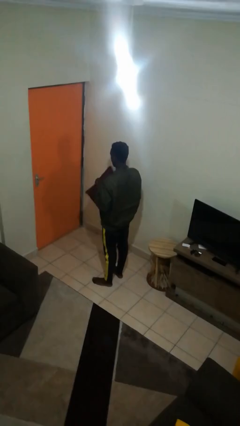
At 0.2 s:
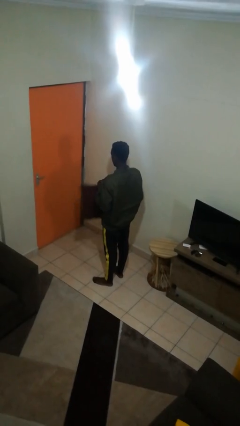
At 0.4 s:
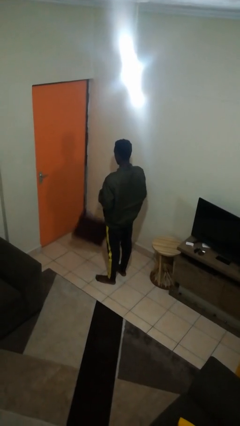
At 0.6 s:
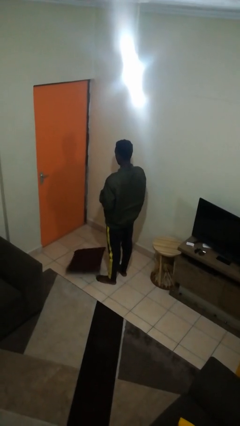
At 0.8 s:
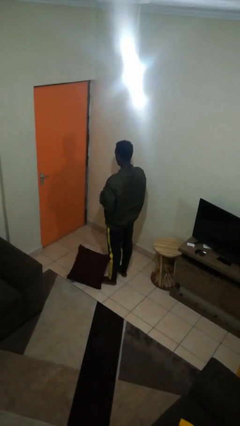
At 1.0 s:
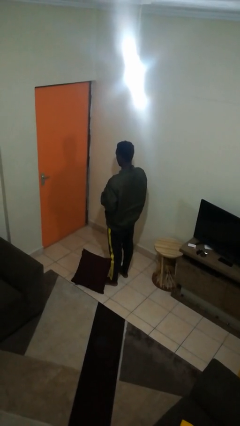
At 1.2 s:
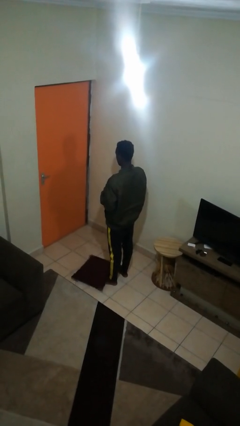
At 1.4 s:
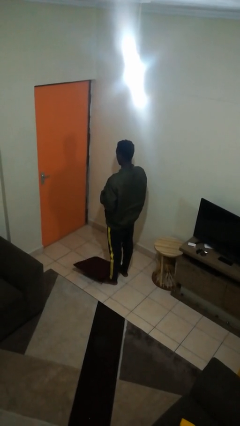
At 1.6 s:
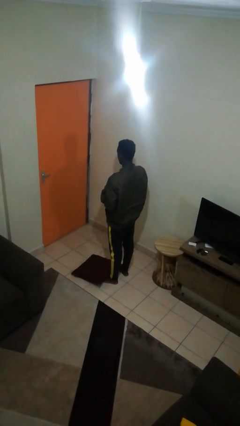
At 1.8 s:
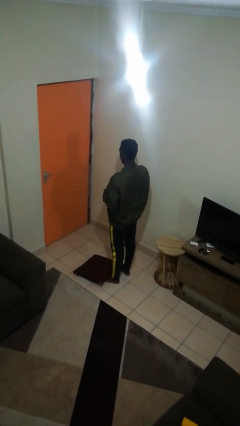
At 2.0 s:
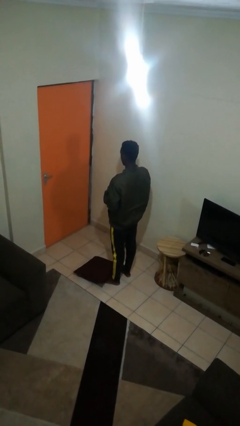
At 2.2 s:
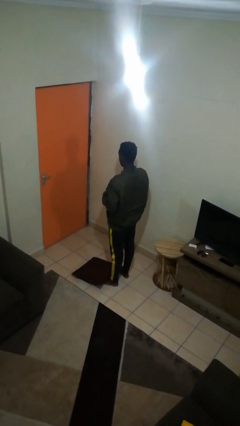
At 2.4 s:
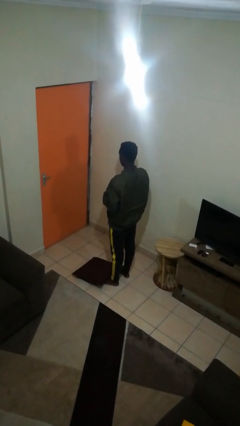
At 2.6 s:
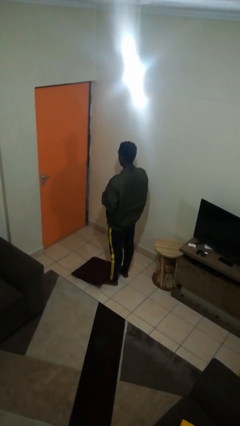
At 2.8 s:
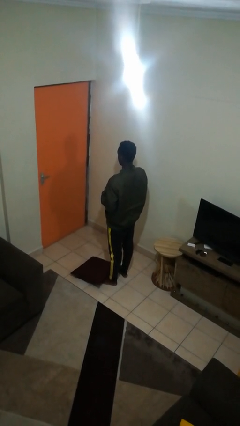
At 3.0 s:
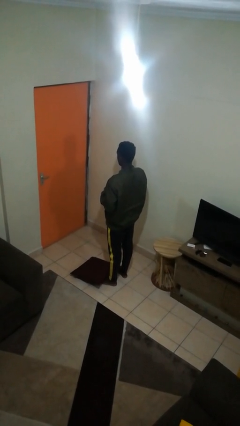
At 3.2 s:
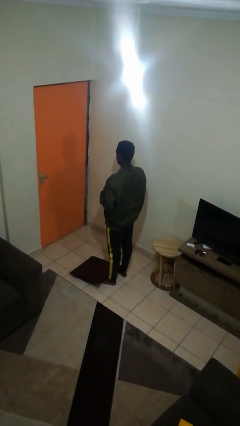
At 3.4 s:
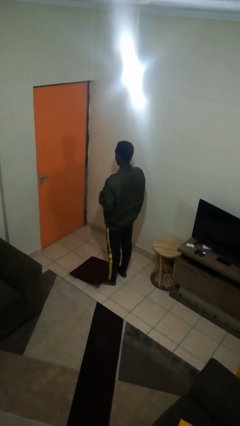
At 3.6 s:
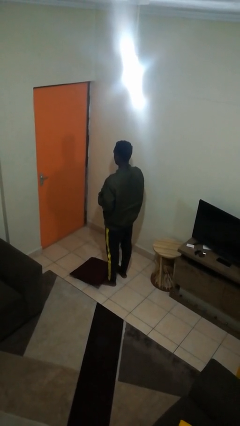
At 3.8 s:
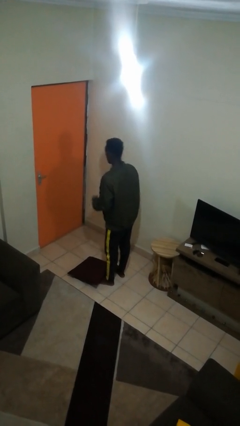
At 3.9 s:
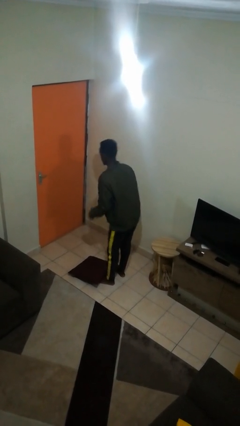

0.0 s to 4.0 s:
person drops object

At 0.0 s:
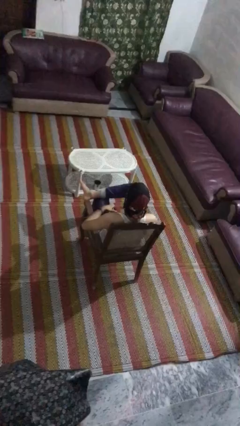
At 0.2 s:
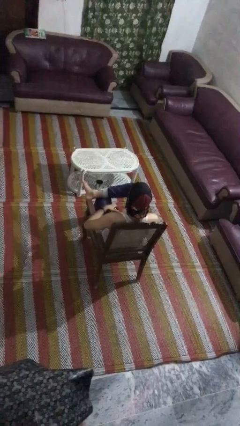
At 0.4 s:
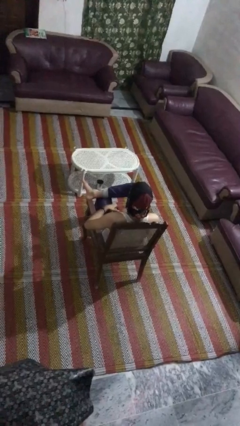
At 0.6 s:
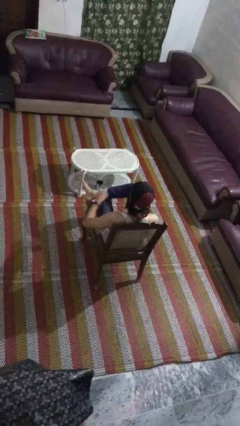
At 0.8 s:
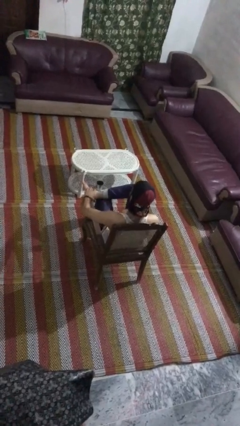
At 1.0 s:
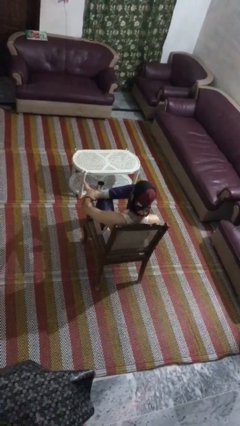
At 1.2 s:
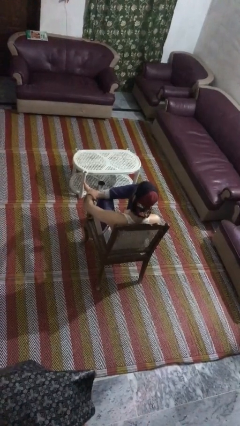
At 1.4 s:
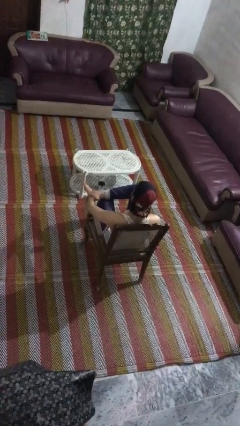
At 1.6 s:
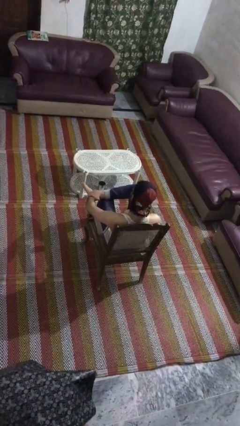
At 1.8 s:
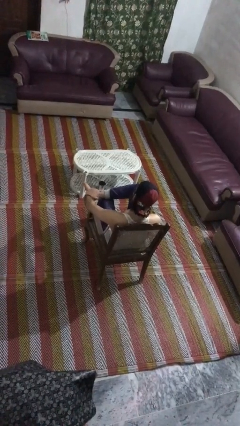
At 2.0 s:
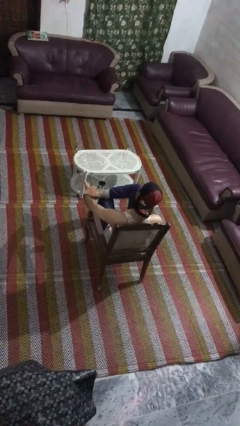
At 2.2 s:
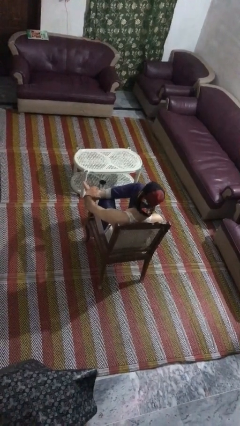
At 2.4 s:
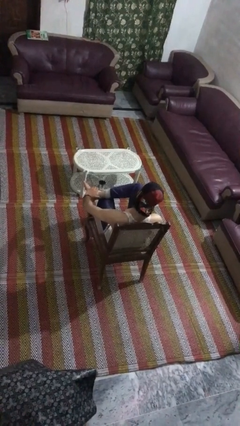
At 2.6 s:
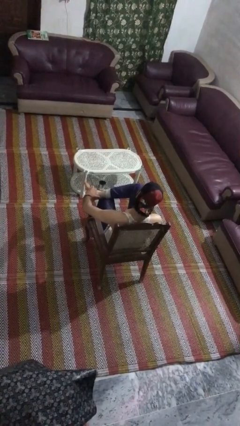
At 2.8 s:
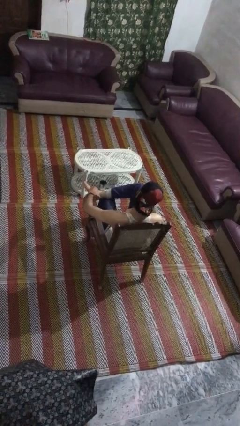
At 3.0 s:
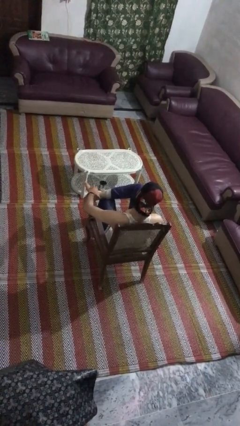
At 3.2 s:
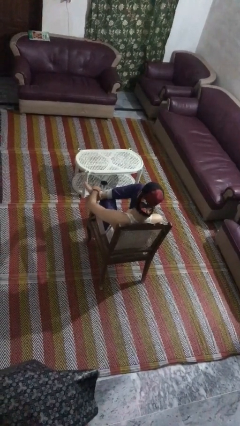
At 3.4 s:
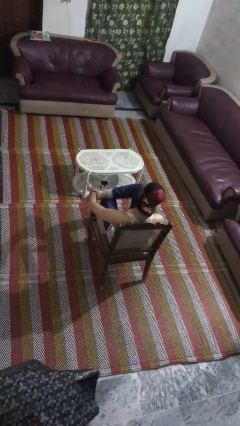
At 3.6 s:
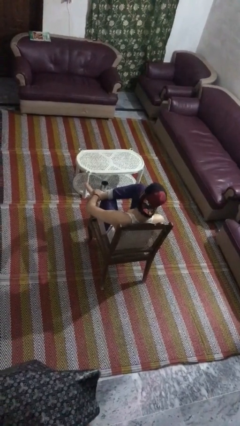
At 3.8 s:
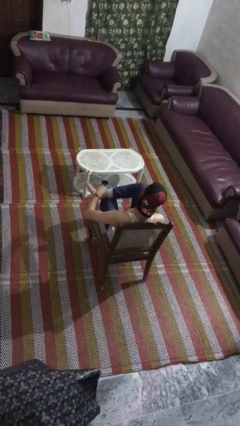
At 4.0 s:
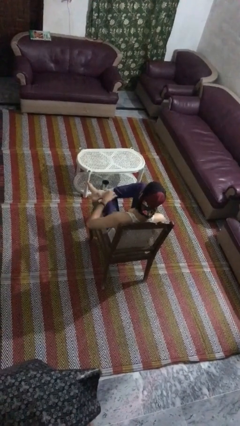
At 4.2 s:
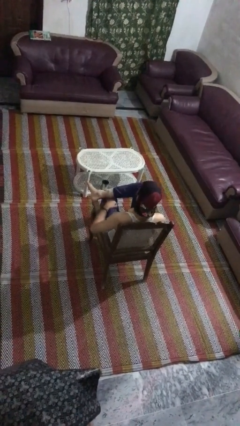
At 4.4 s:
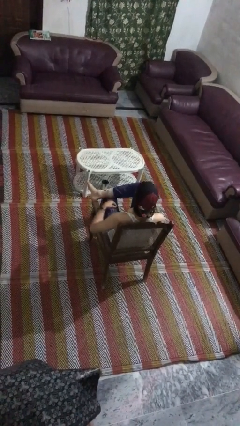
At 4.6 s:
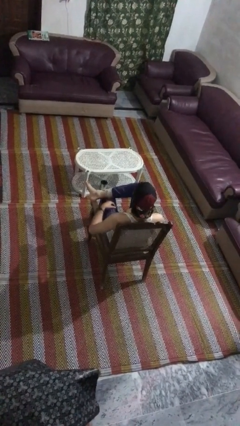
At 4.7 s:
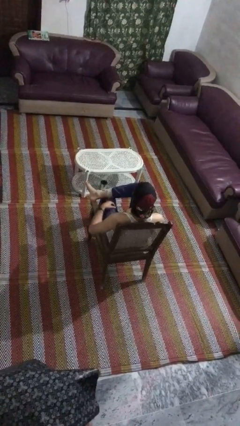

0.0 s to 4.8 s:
person rubs foot

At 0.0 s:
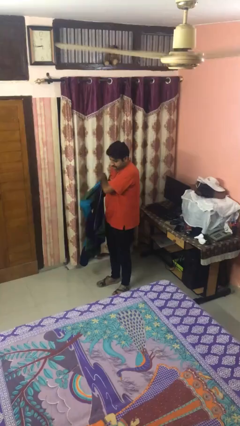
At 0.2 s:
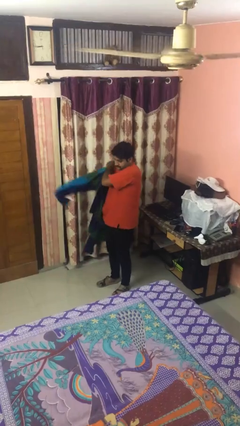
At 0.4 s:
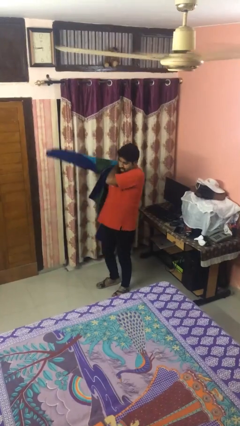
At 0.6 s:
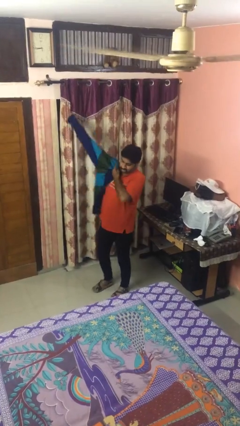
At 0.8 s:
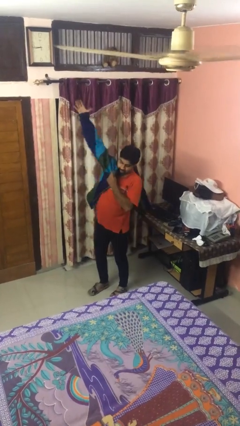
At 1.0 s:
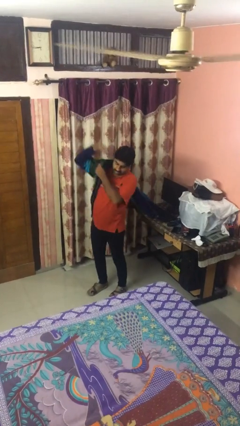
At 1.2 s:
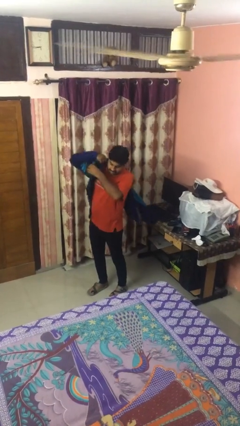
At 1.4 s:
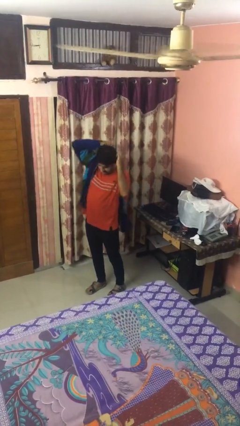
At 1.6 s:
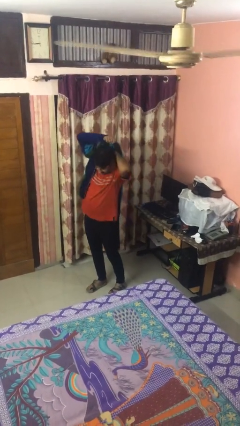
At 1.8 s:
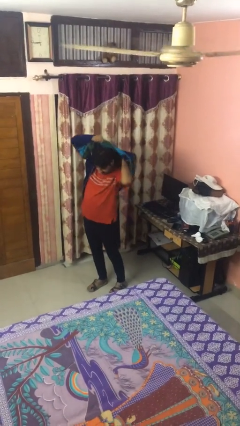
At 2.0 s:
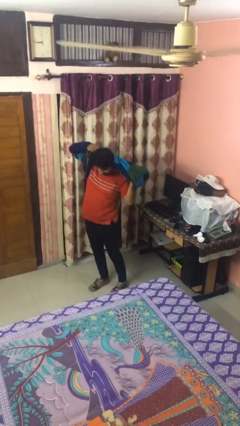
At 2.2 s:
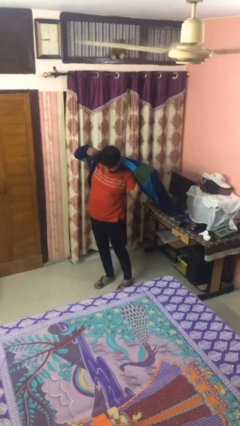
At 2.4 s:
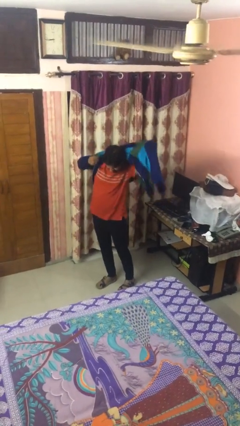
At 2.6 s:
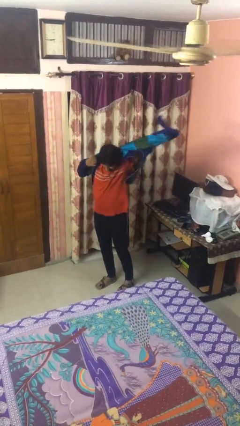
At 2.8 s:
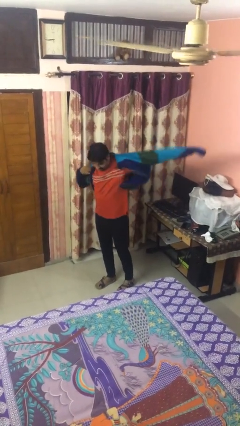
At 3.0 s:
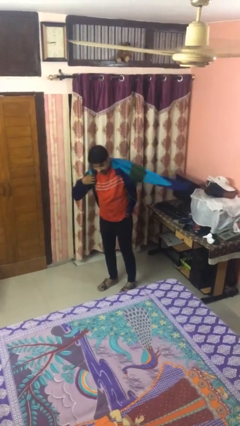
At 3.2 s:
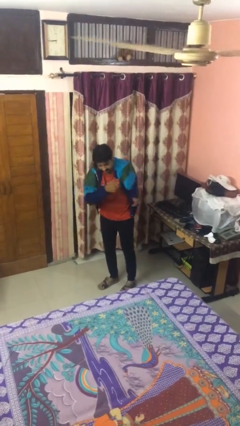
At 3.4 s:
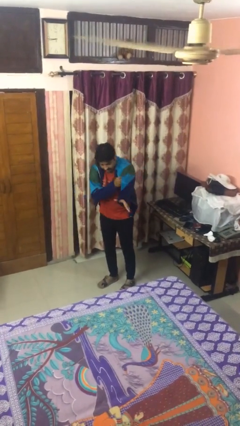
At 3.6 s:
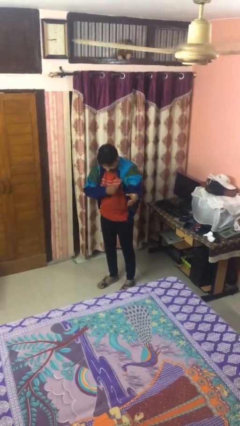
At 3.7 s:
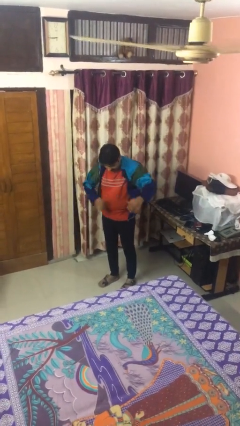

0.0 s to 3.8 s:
person puts on jacket

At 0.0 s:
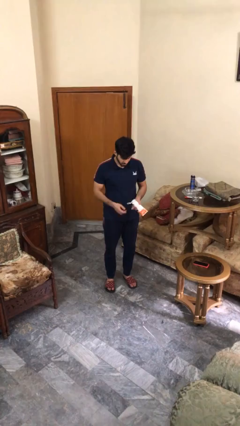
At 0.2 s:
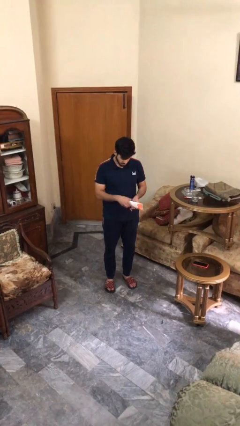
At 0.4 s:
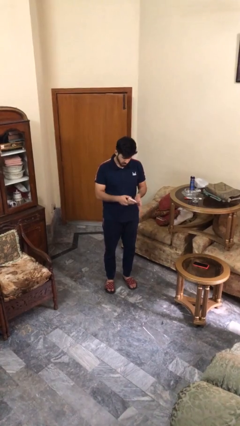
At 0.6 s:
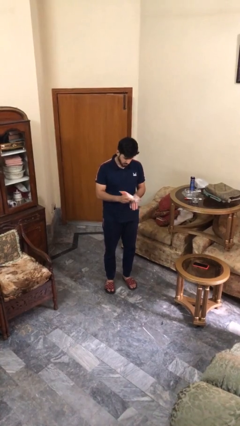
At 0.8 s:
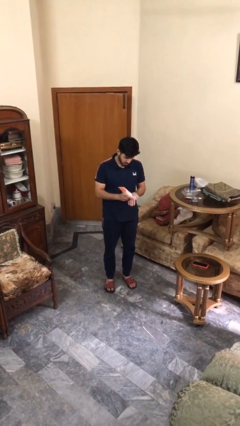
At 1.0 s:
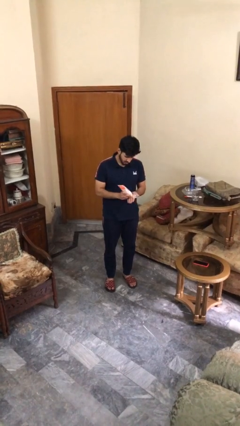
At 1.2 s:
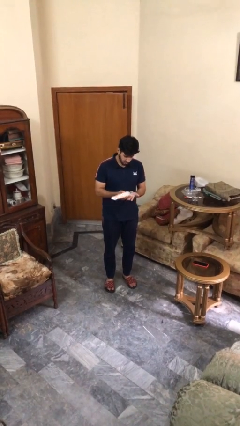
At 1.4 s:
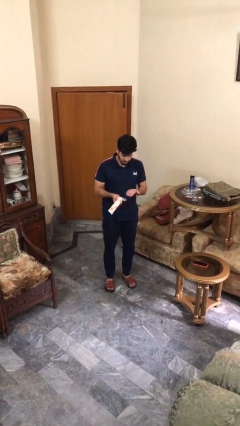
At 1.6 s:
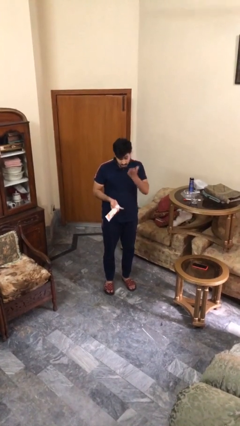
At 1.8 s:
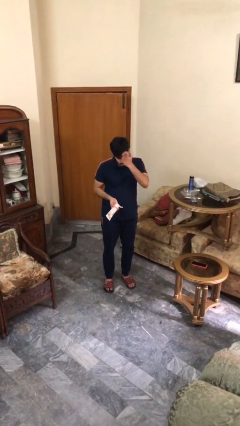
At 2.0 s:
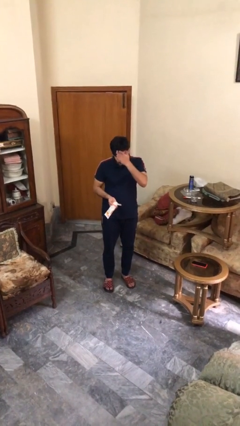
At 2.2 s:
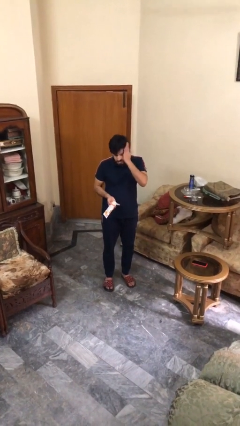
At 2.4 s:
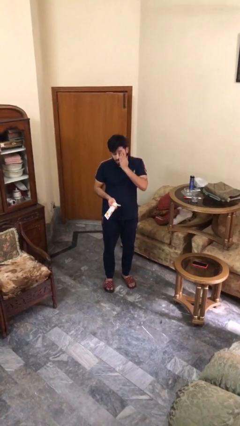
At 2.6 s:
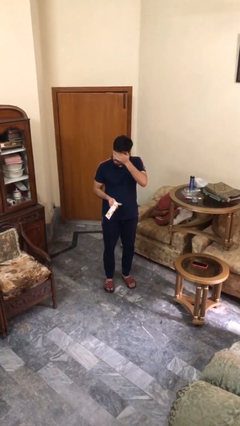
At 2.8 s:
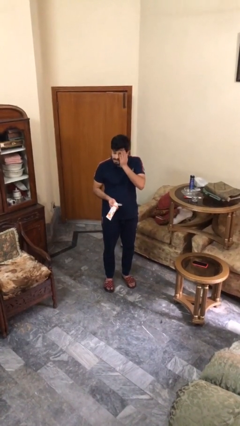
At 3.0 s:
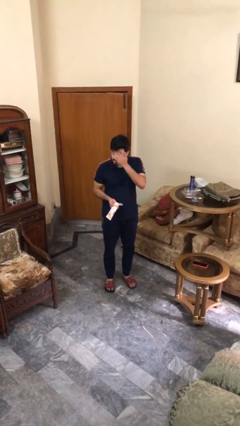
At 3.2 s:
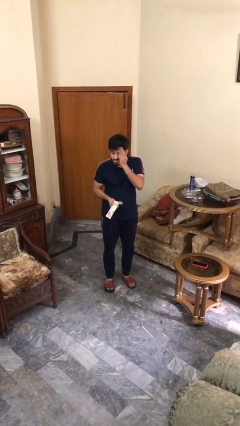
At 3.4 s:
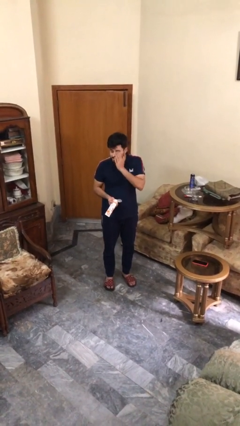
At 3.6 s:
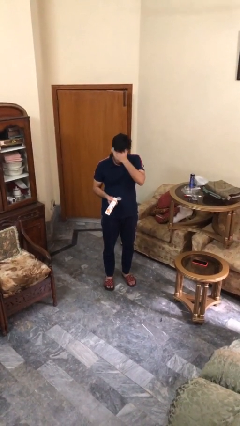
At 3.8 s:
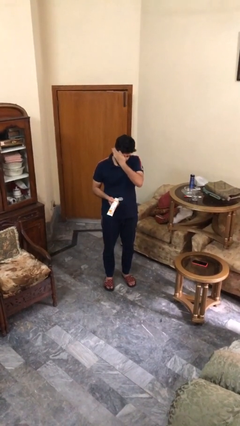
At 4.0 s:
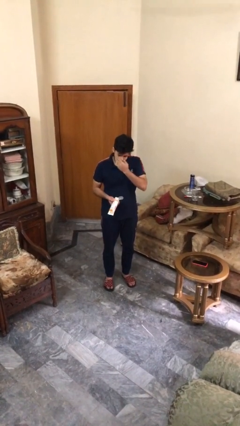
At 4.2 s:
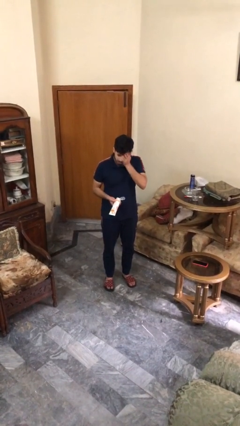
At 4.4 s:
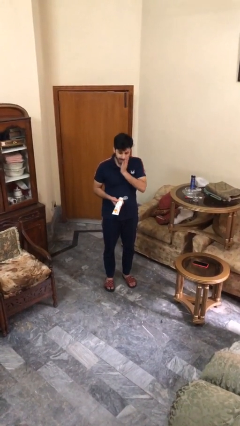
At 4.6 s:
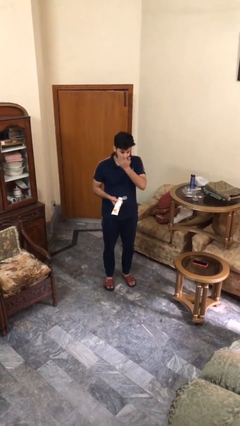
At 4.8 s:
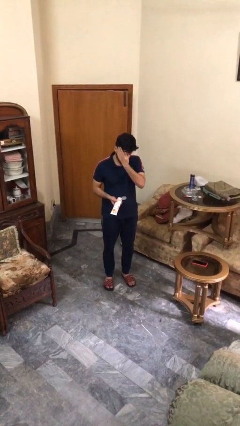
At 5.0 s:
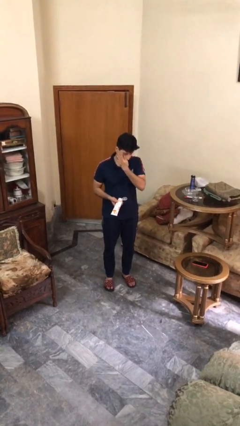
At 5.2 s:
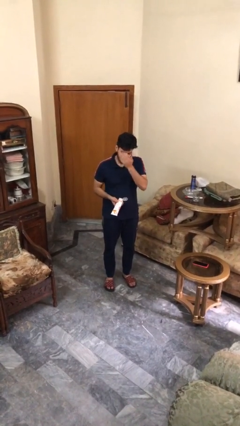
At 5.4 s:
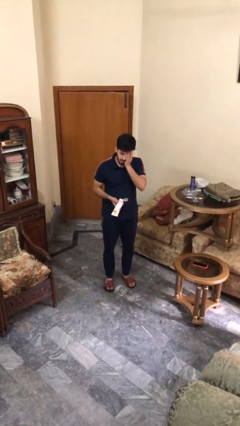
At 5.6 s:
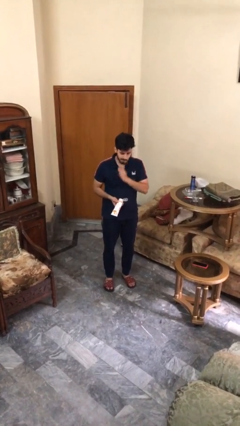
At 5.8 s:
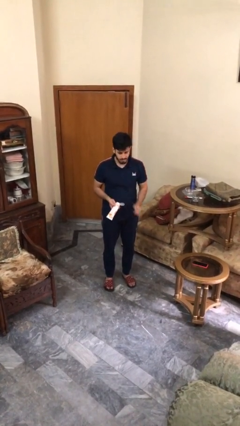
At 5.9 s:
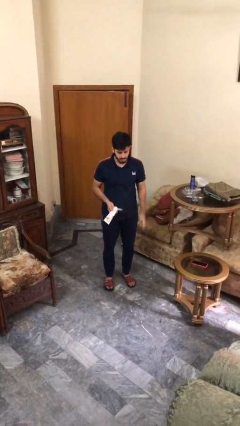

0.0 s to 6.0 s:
person applies sunscreen
